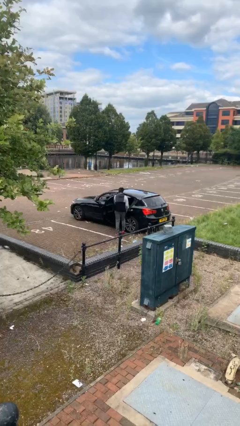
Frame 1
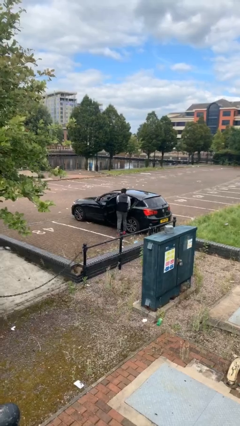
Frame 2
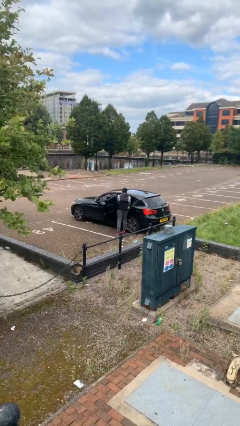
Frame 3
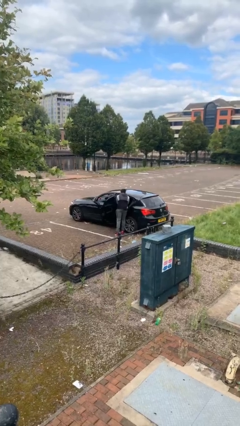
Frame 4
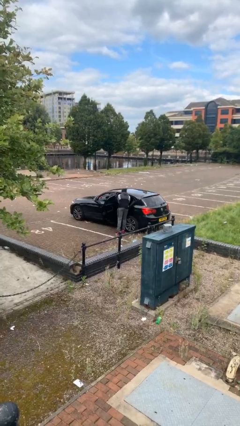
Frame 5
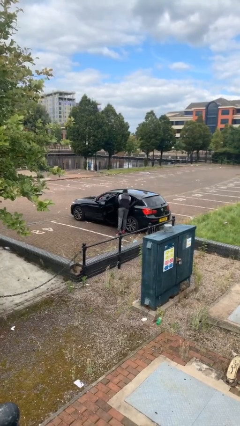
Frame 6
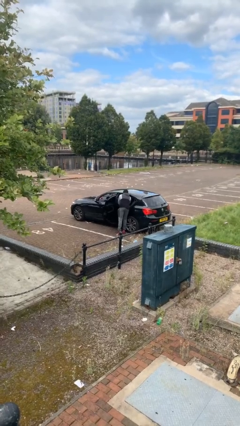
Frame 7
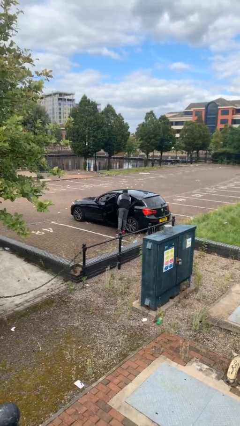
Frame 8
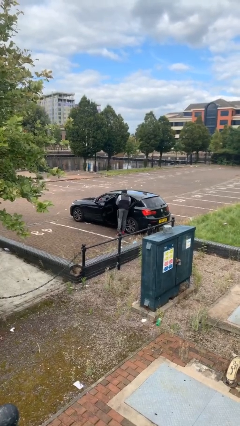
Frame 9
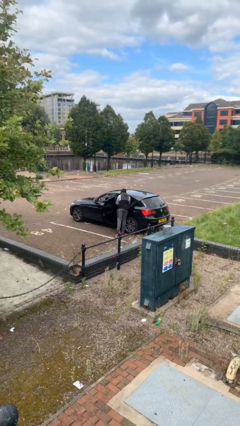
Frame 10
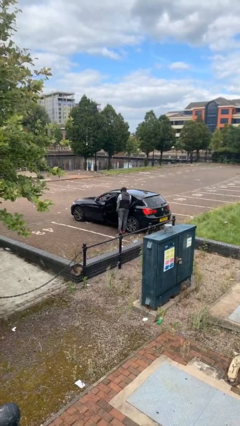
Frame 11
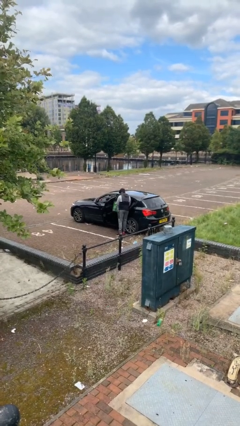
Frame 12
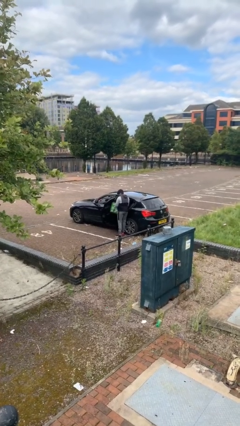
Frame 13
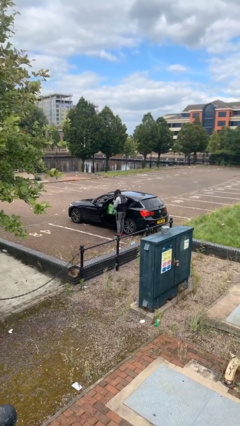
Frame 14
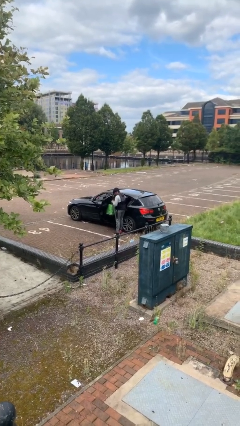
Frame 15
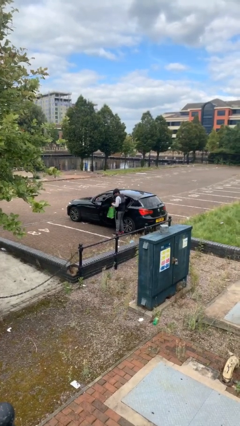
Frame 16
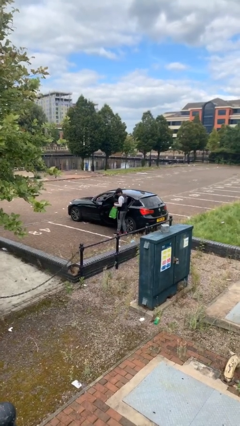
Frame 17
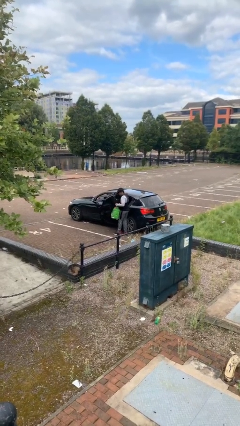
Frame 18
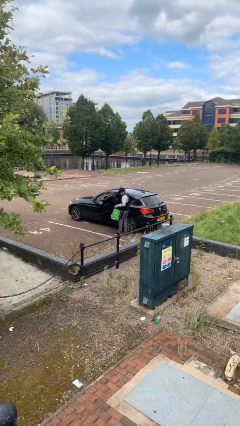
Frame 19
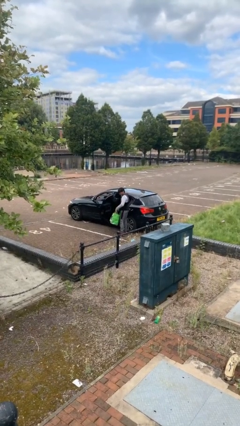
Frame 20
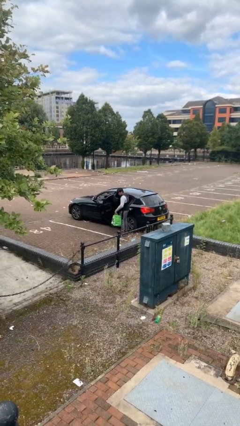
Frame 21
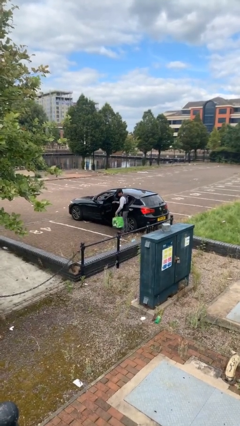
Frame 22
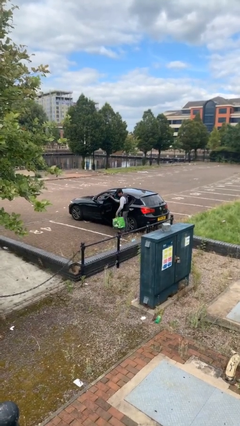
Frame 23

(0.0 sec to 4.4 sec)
person unloads car

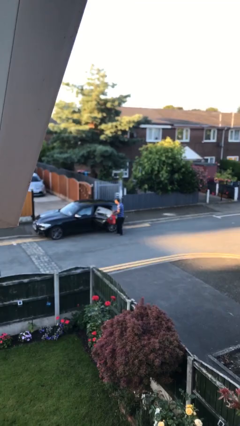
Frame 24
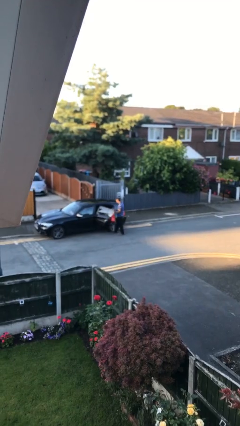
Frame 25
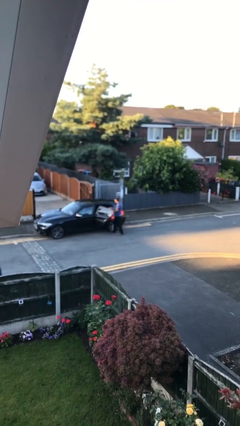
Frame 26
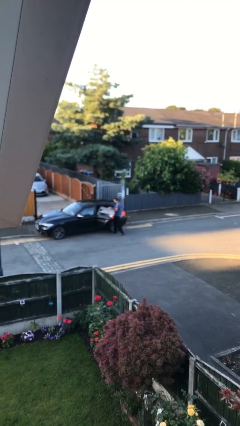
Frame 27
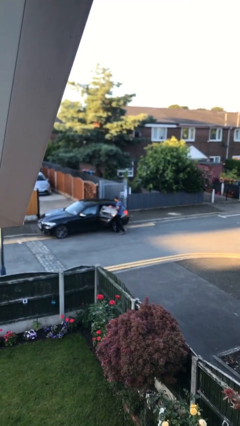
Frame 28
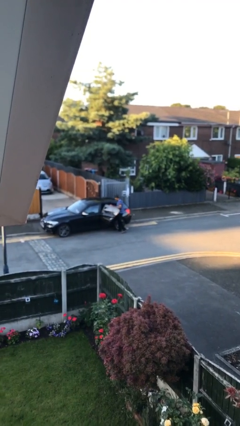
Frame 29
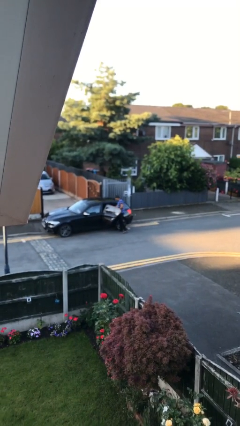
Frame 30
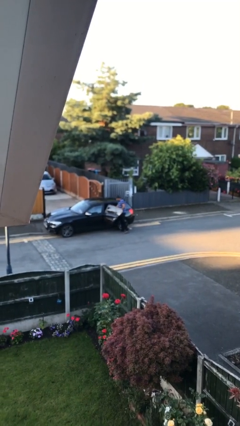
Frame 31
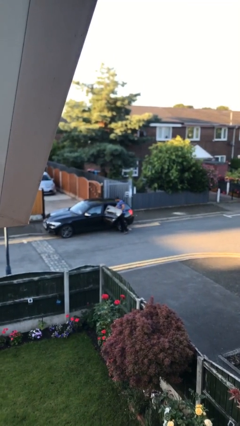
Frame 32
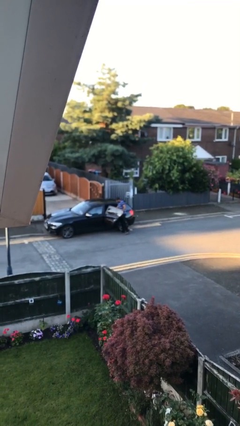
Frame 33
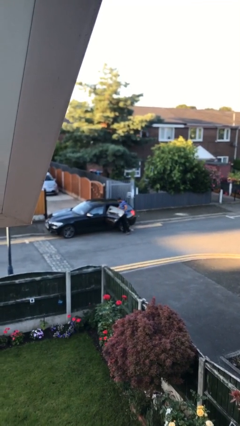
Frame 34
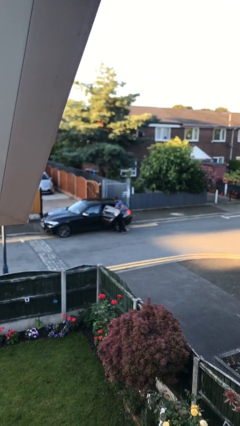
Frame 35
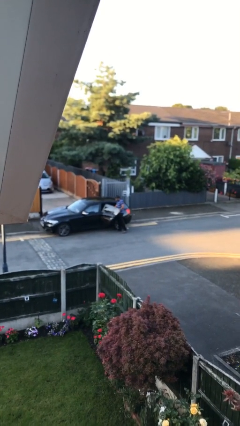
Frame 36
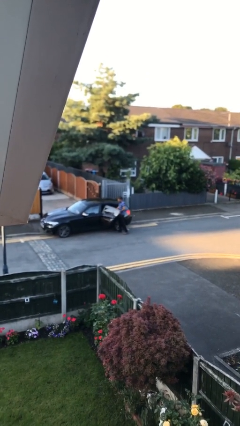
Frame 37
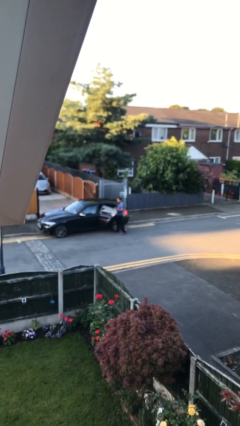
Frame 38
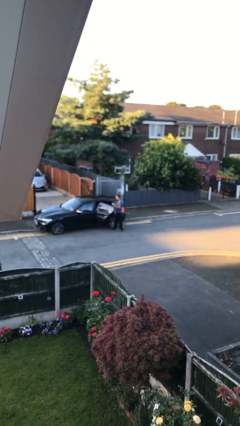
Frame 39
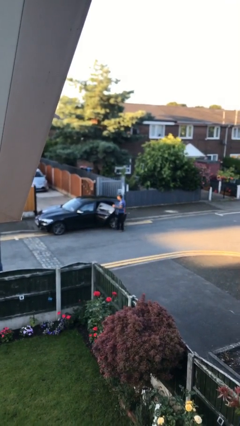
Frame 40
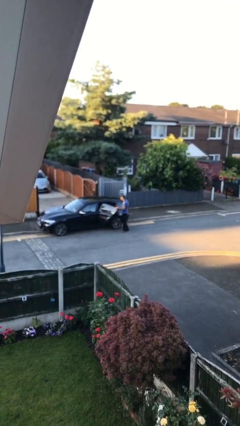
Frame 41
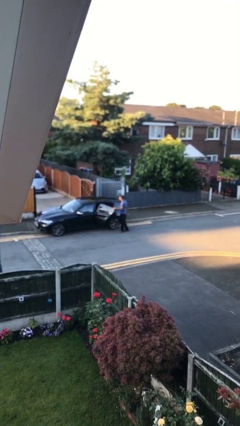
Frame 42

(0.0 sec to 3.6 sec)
person loads car

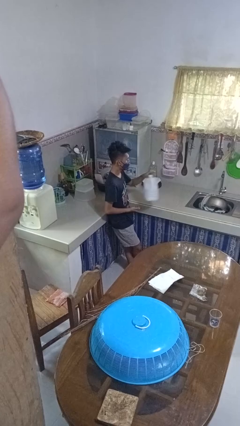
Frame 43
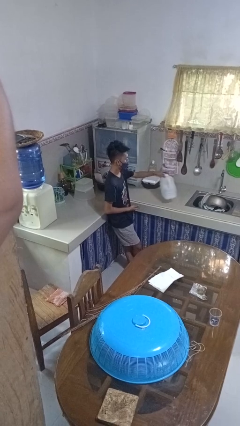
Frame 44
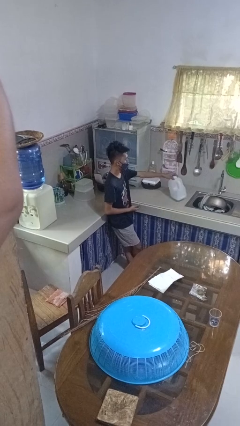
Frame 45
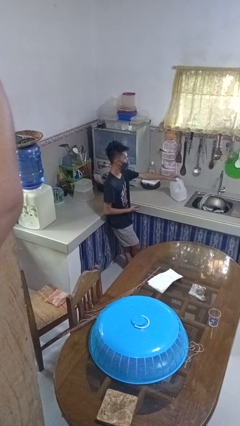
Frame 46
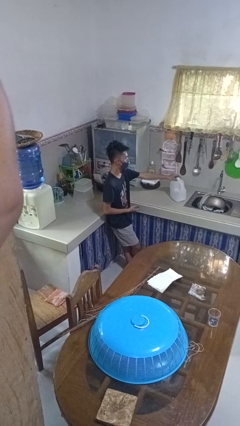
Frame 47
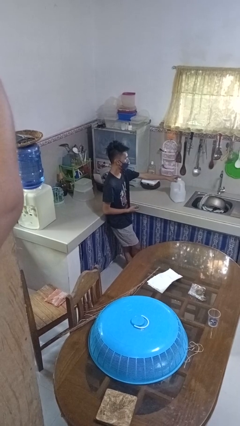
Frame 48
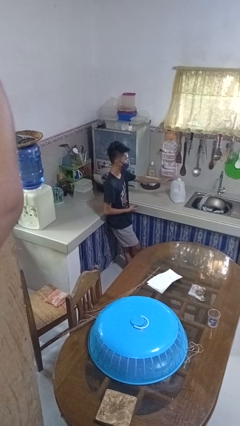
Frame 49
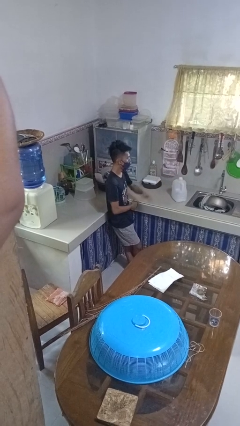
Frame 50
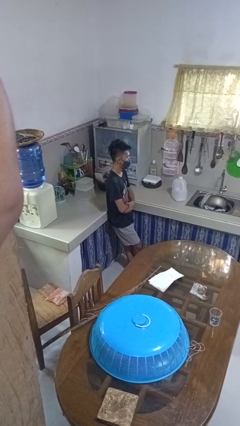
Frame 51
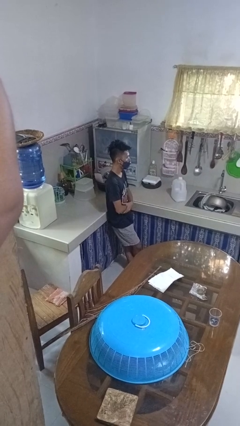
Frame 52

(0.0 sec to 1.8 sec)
person puts down object on countertop

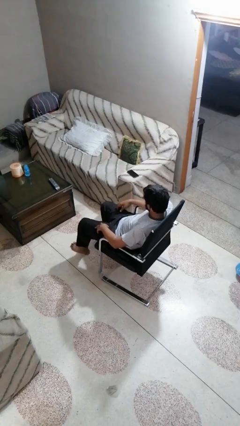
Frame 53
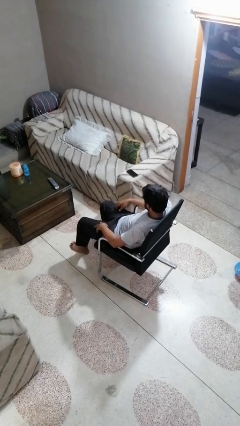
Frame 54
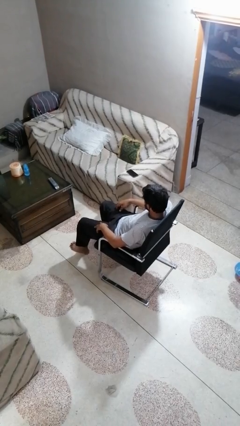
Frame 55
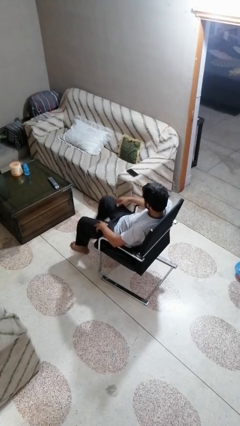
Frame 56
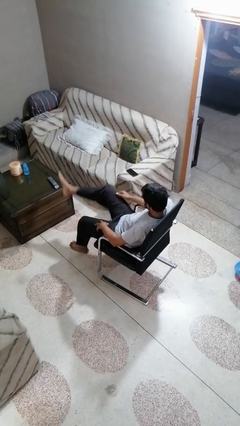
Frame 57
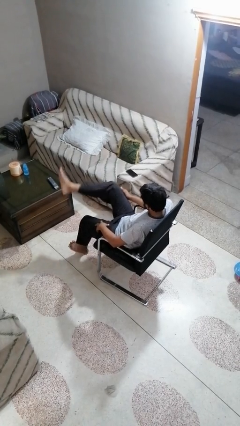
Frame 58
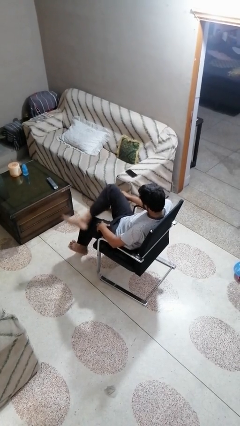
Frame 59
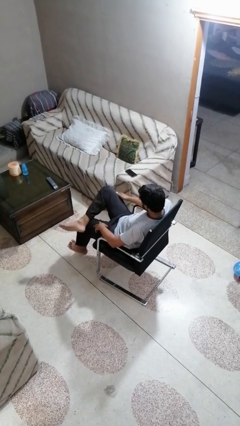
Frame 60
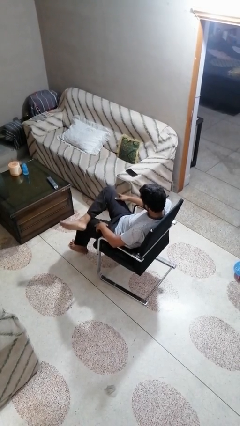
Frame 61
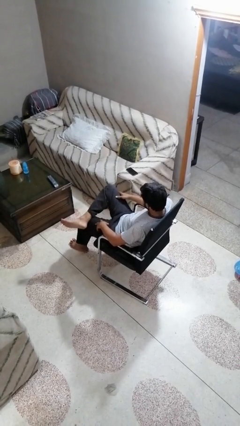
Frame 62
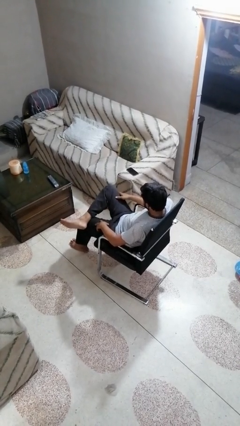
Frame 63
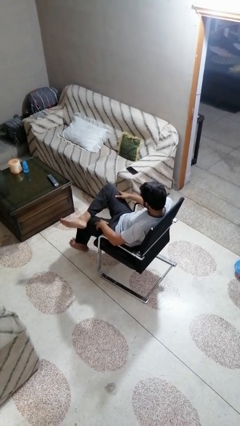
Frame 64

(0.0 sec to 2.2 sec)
person crosses legs

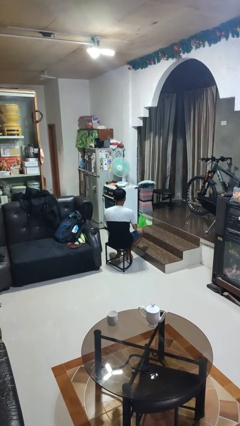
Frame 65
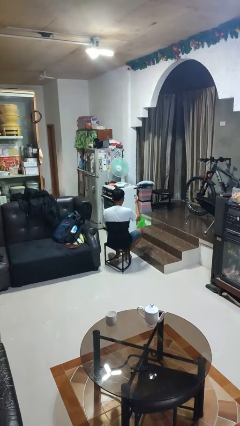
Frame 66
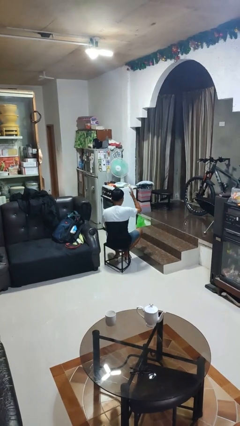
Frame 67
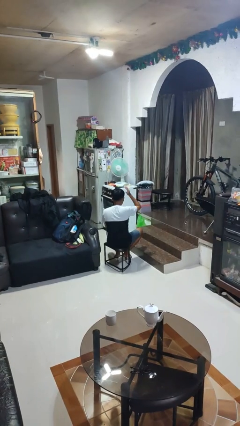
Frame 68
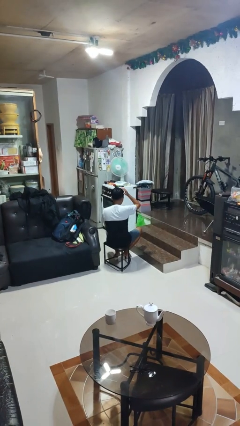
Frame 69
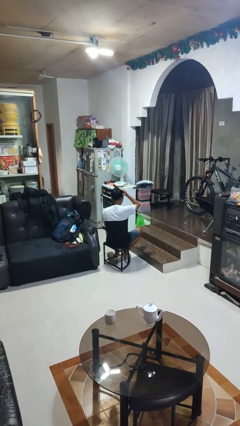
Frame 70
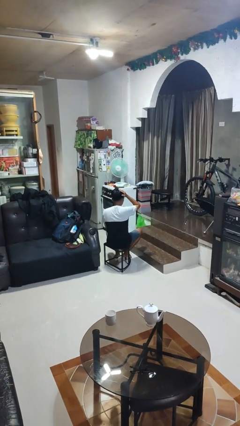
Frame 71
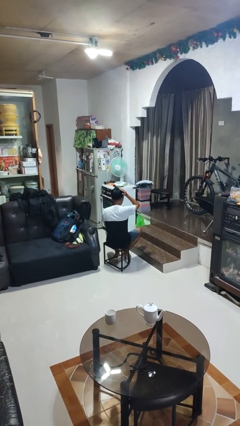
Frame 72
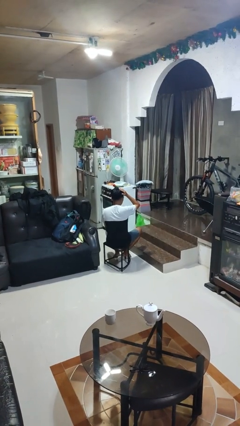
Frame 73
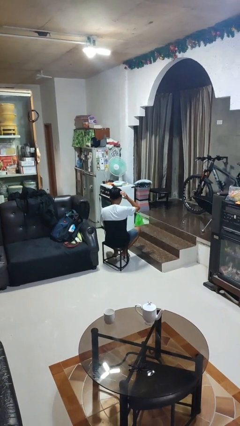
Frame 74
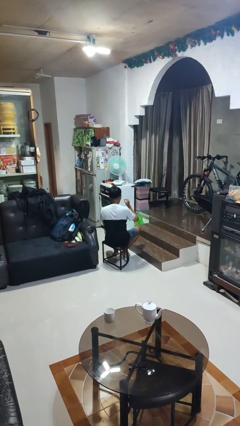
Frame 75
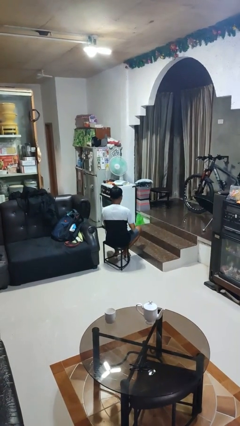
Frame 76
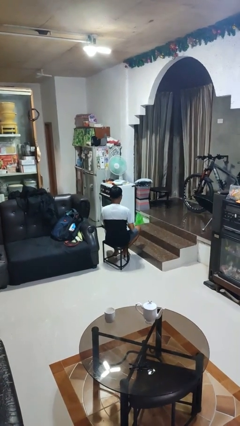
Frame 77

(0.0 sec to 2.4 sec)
person pats head

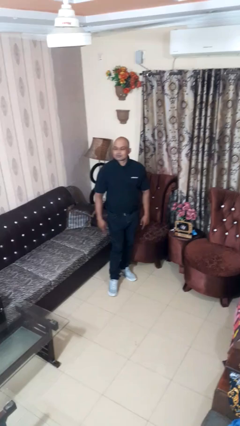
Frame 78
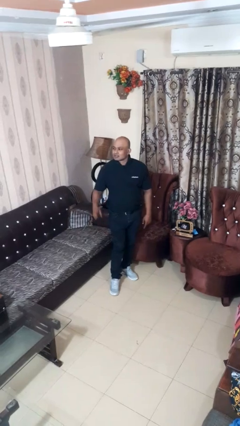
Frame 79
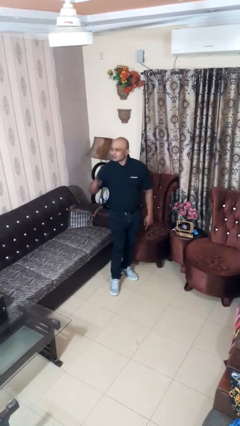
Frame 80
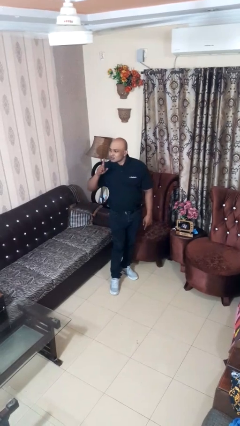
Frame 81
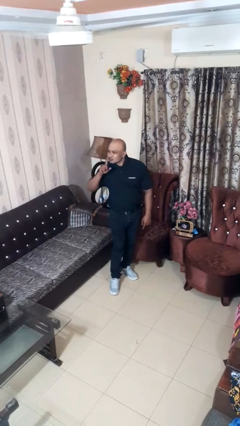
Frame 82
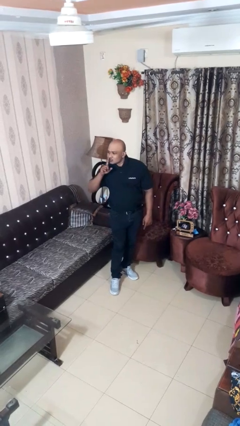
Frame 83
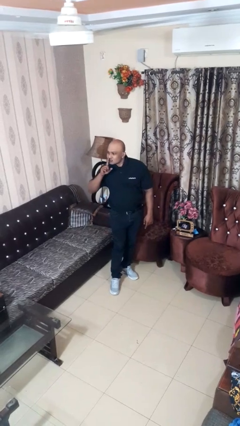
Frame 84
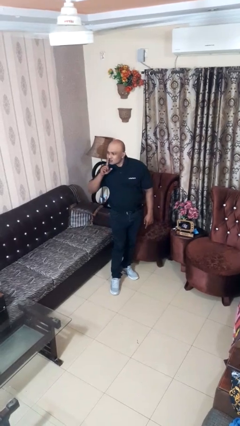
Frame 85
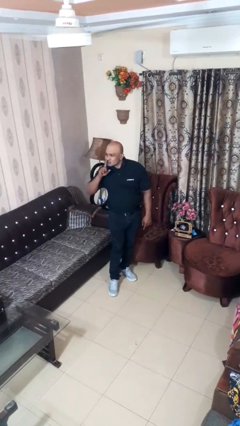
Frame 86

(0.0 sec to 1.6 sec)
person gestures be quiet

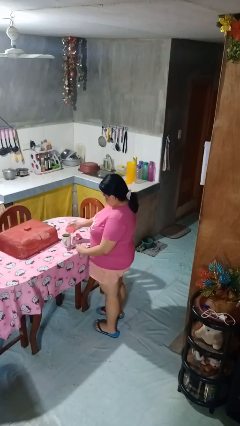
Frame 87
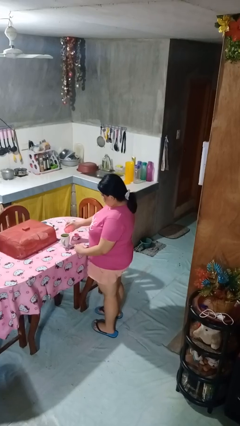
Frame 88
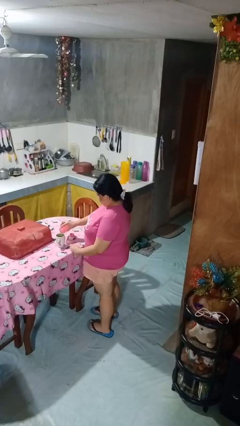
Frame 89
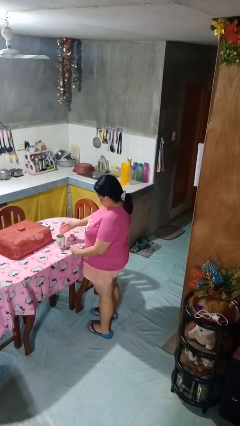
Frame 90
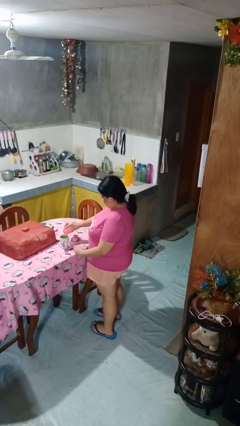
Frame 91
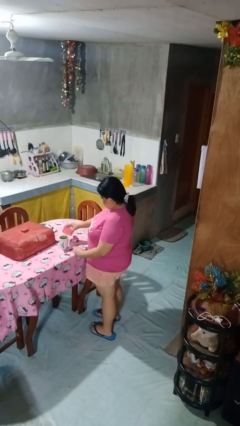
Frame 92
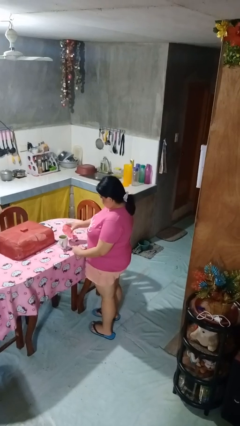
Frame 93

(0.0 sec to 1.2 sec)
person pours liquid into cup
